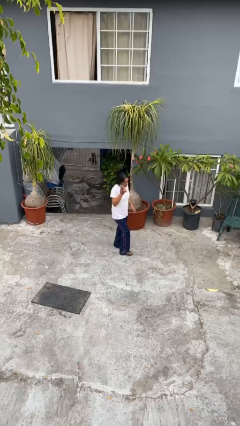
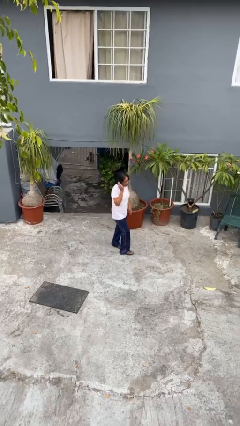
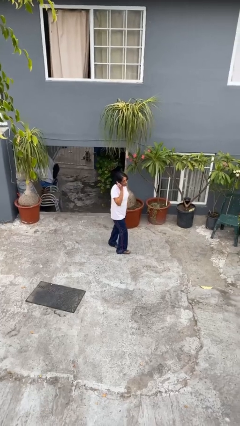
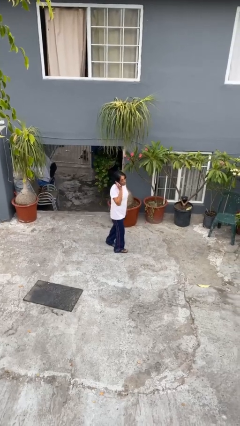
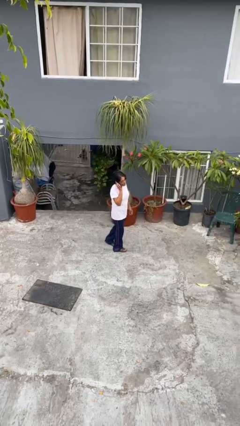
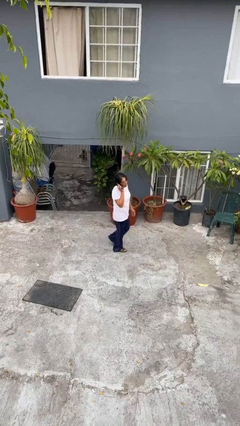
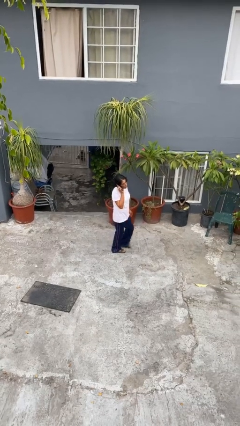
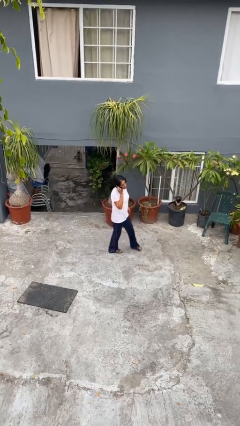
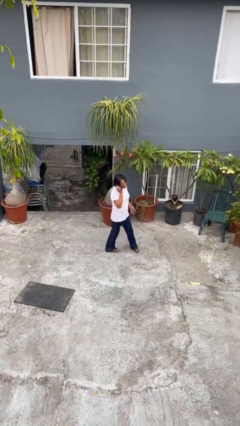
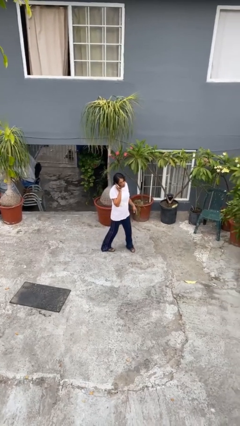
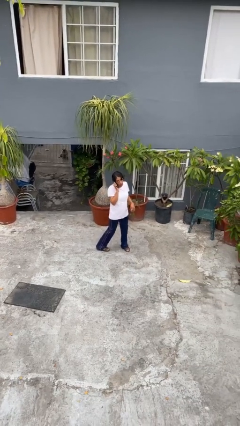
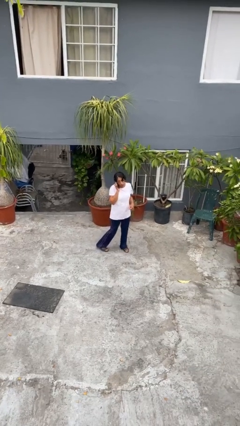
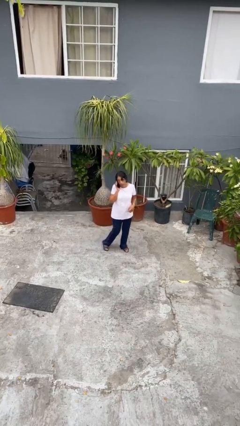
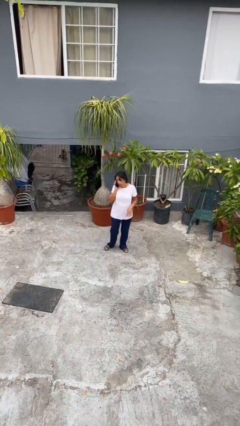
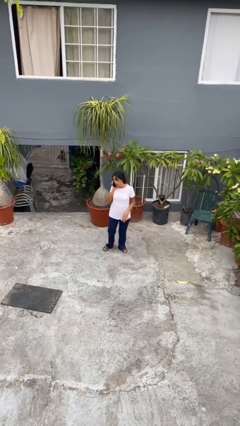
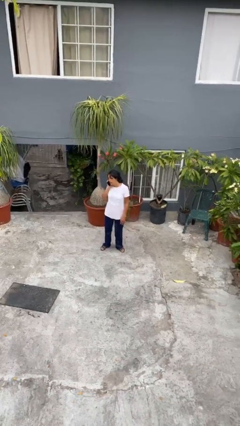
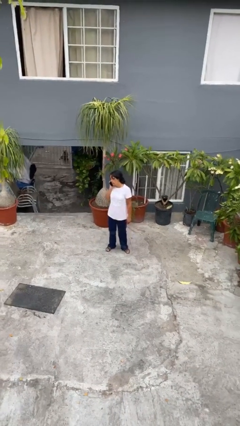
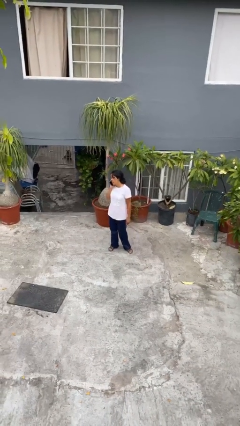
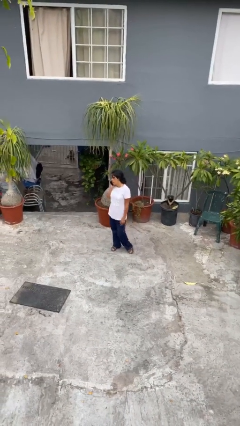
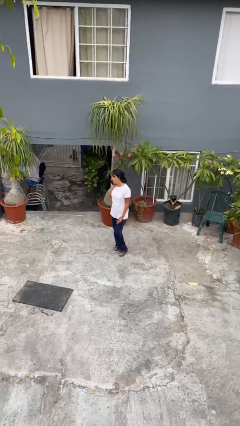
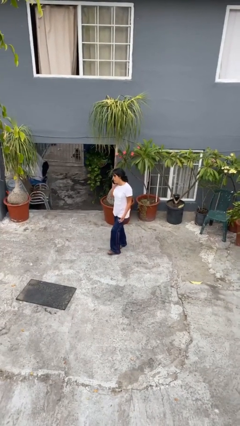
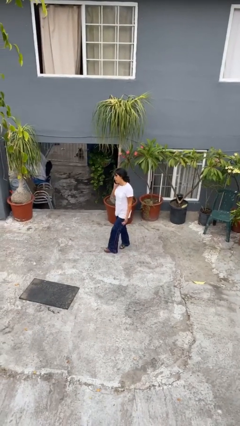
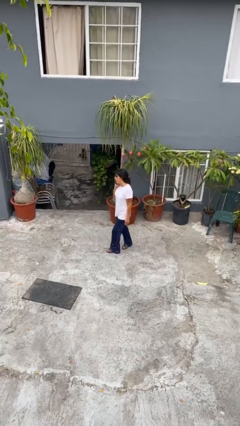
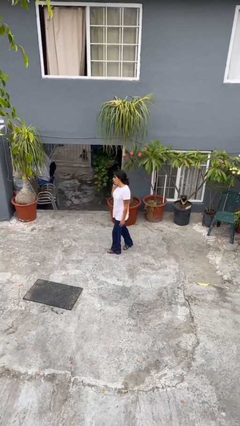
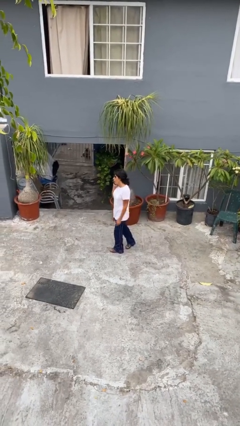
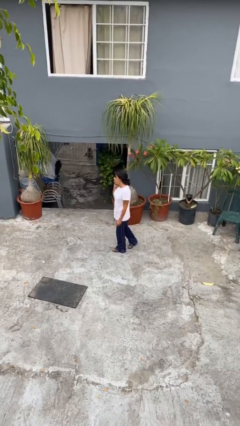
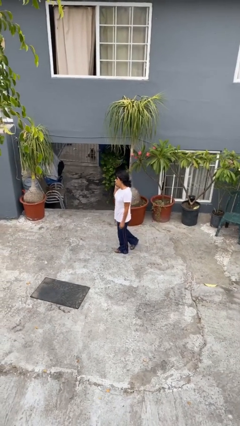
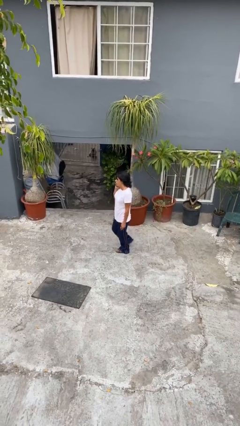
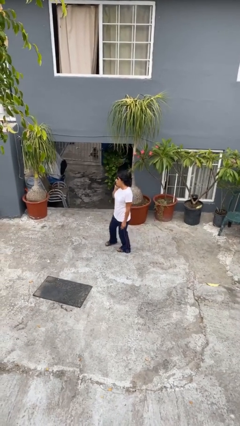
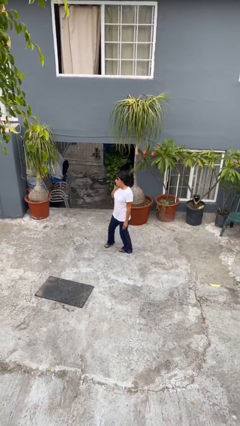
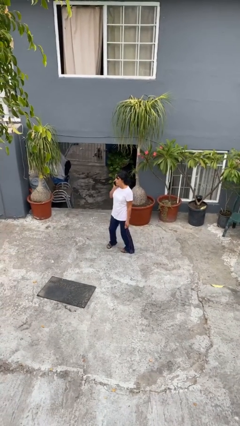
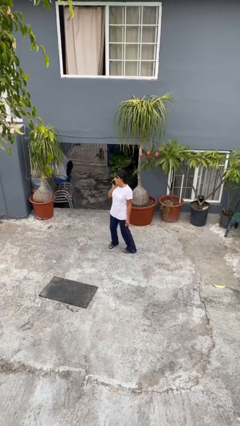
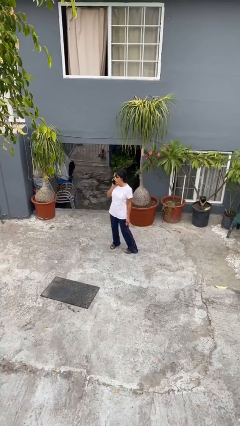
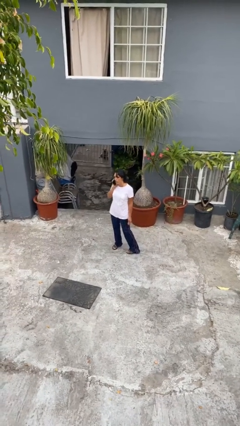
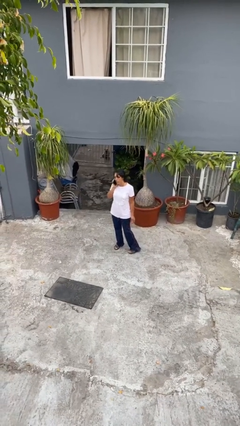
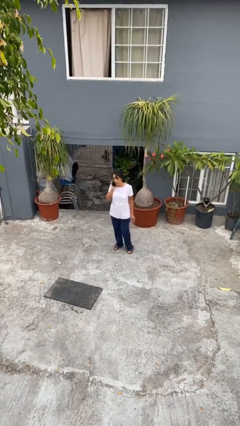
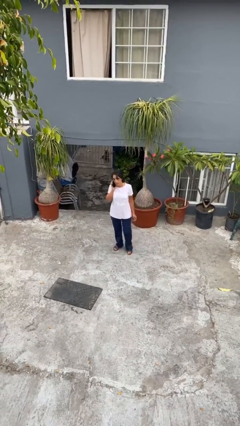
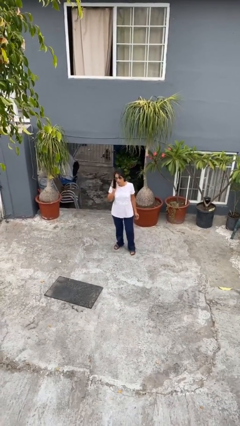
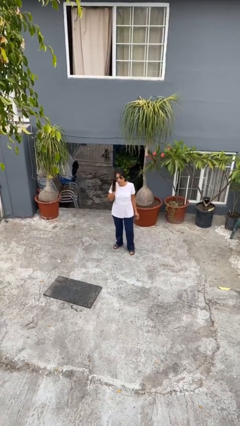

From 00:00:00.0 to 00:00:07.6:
person talks on phone

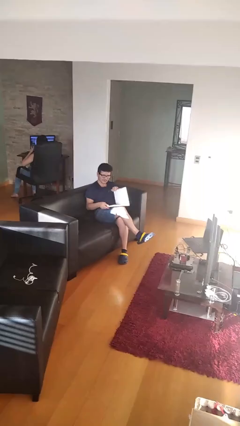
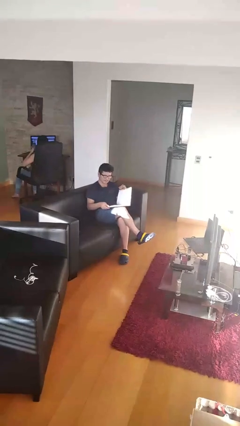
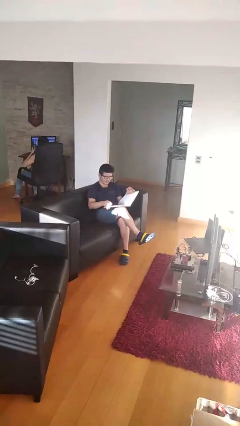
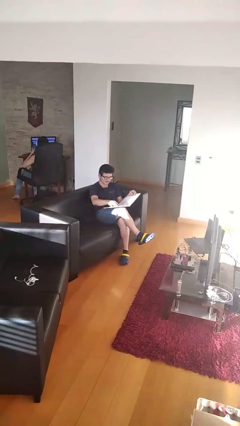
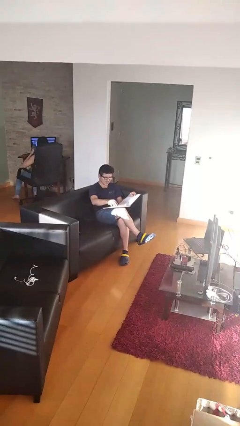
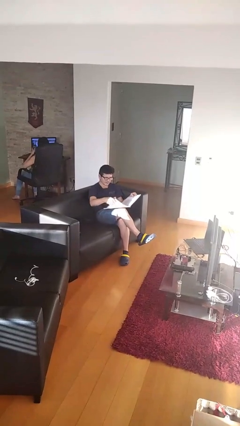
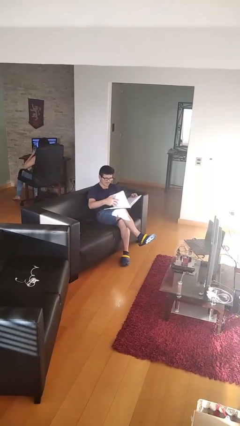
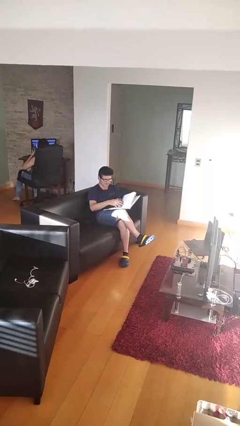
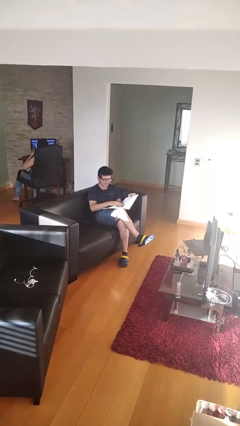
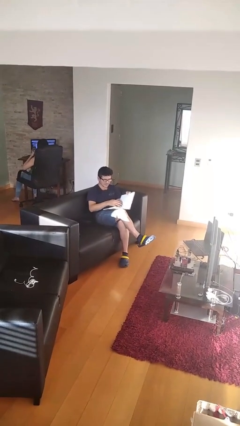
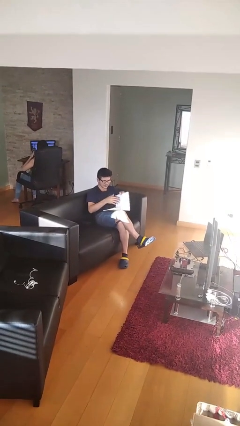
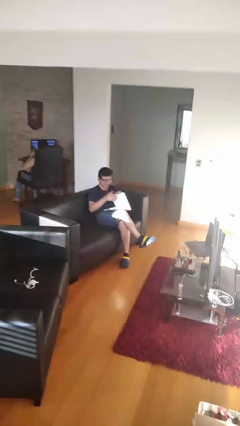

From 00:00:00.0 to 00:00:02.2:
person reads document

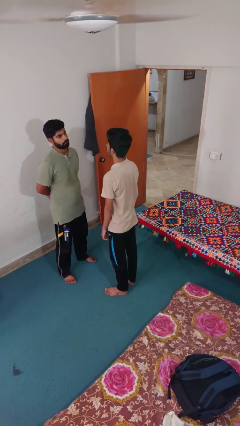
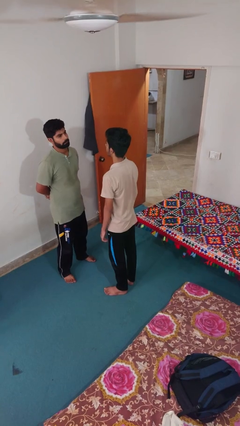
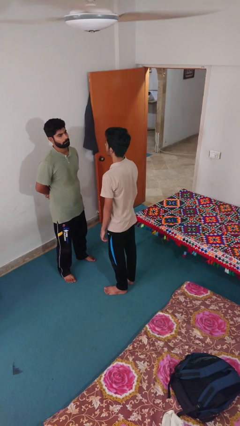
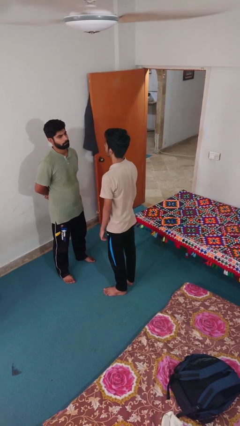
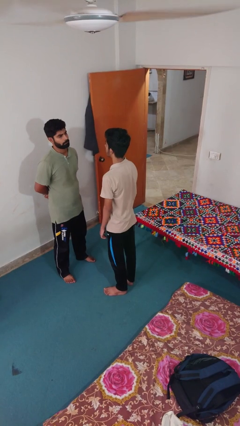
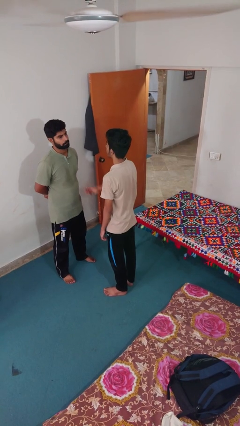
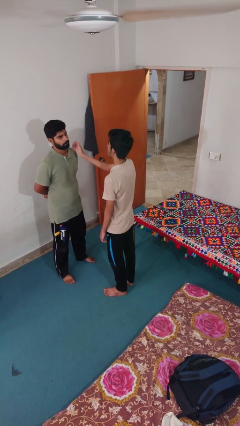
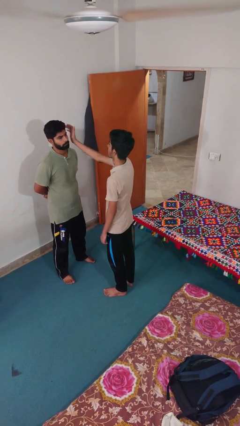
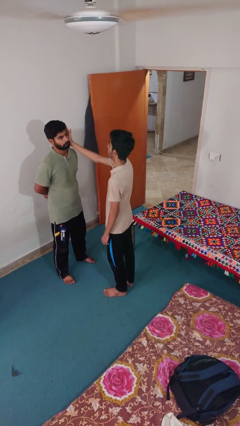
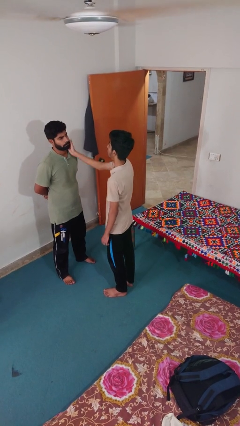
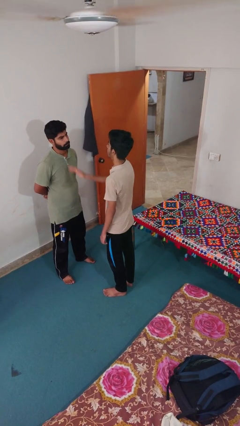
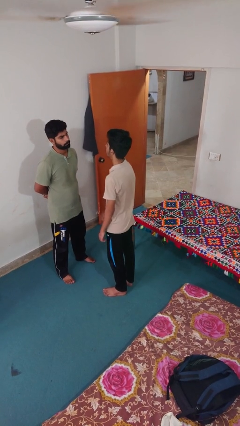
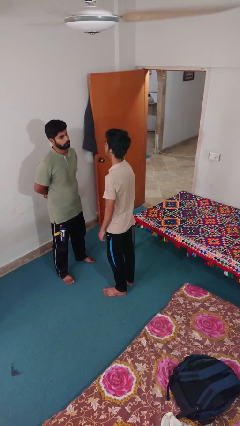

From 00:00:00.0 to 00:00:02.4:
person touches face of person

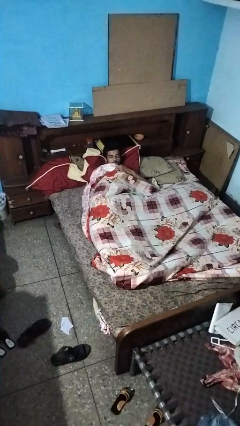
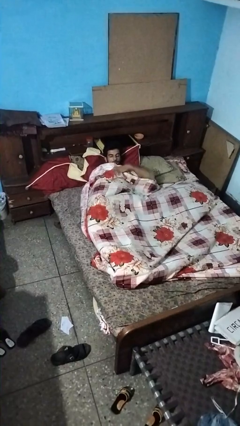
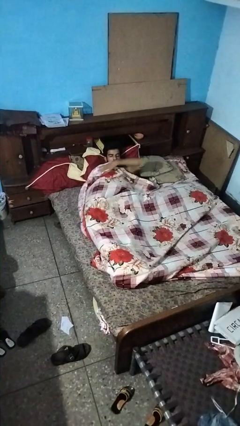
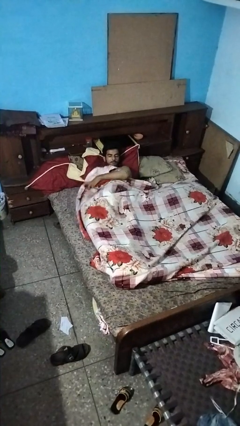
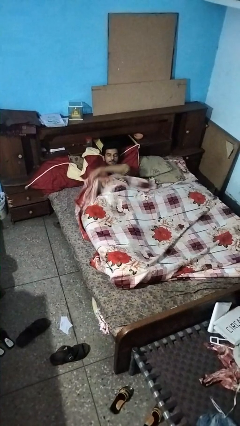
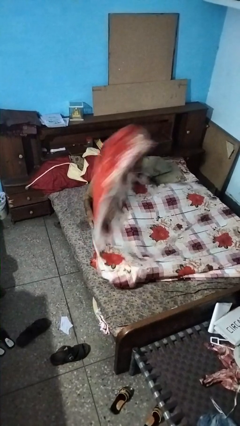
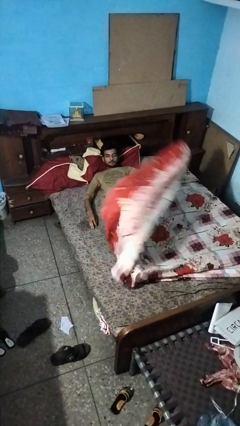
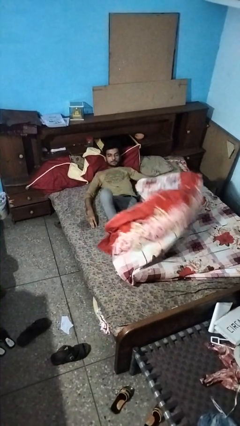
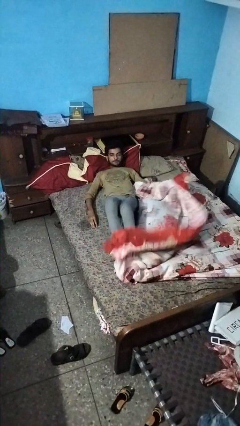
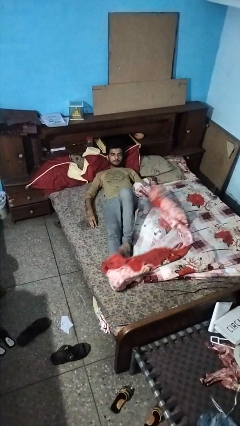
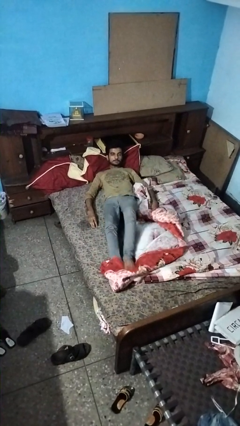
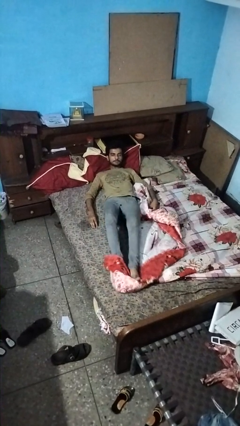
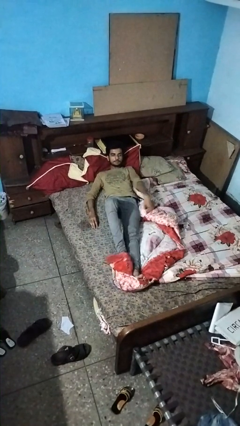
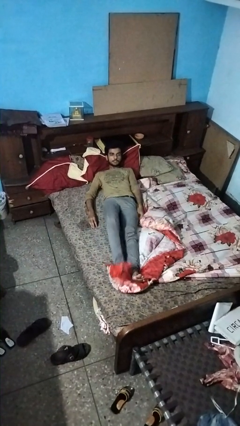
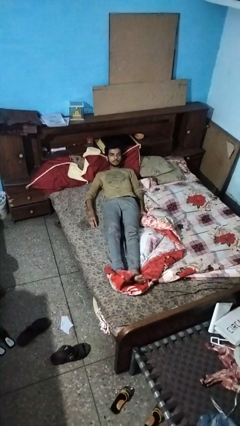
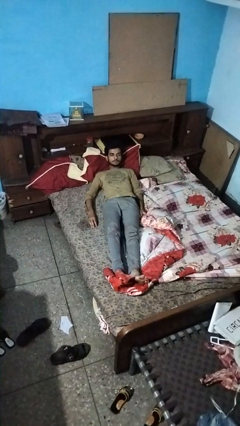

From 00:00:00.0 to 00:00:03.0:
person uncovers with bedsheets

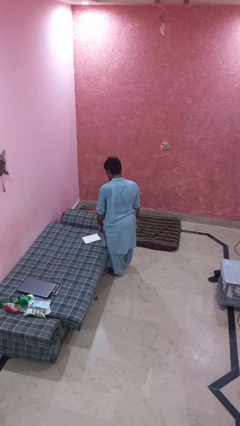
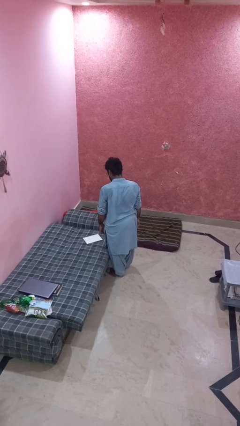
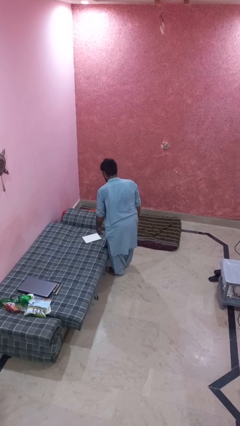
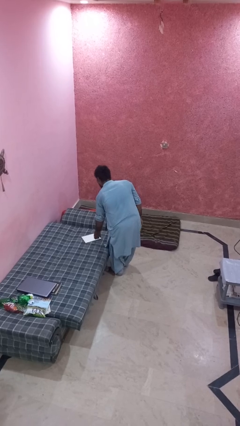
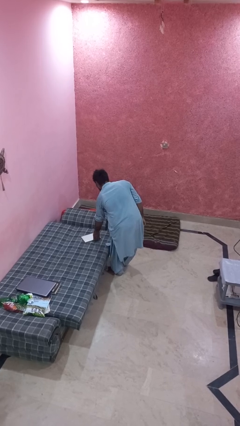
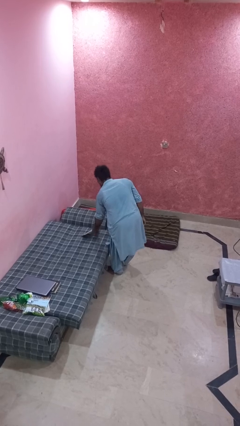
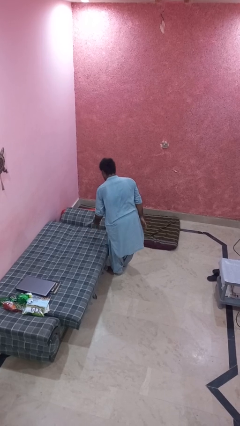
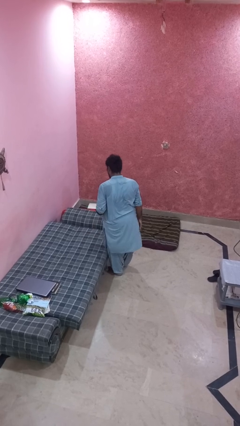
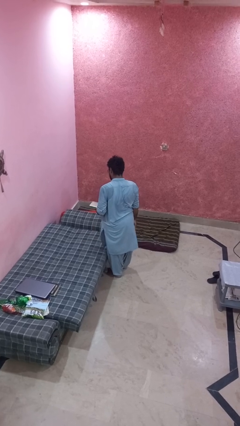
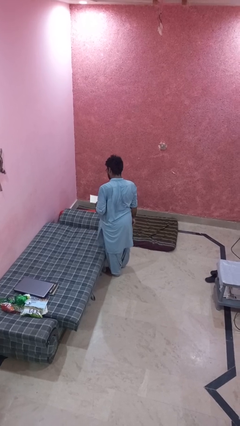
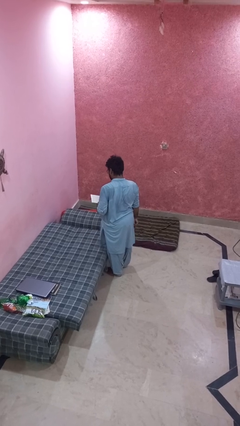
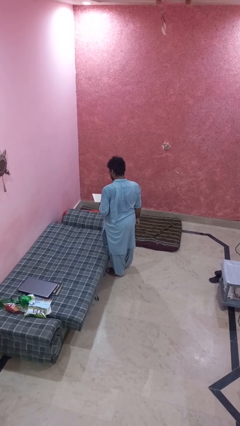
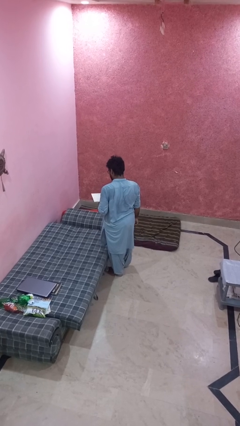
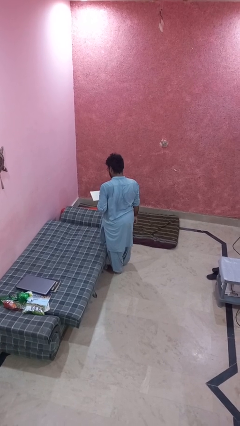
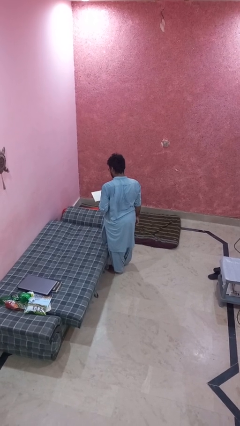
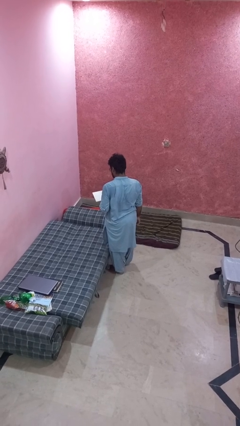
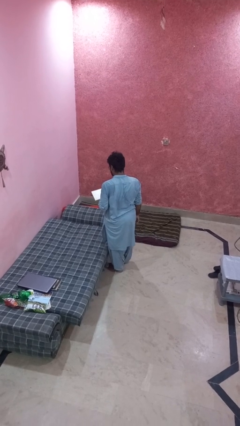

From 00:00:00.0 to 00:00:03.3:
person picks up object from bed
